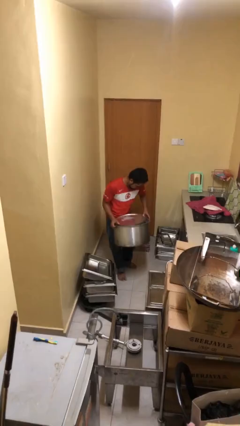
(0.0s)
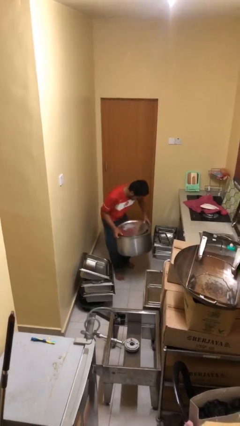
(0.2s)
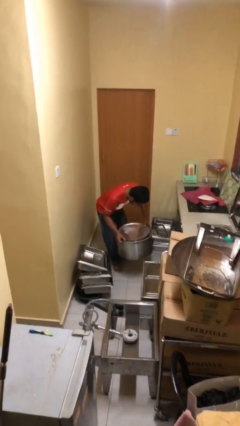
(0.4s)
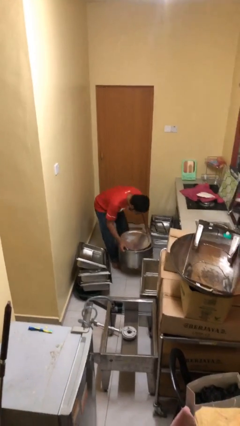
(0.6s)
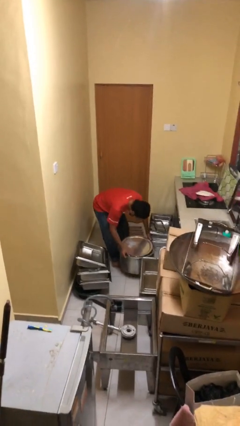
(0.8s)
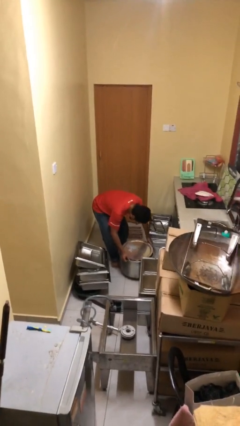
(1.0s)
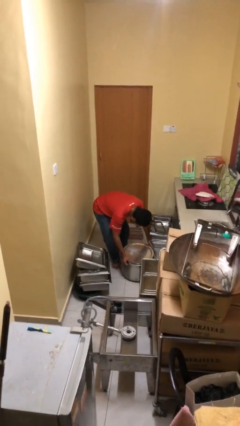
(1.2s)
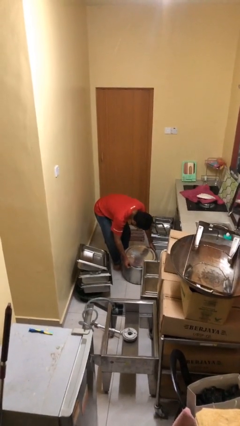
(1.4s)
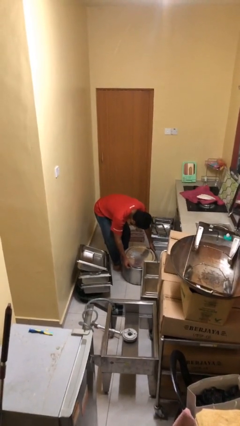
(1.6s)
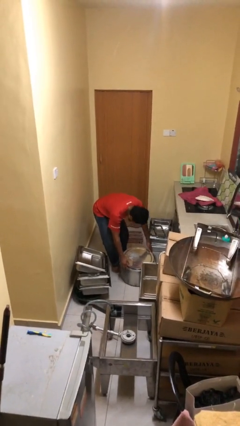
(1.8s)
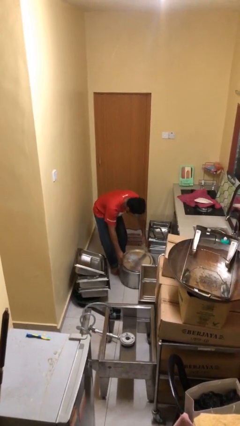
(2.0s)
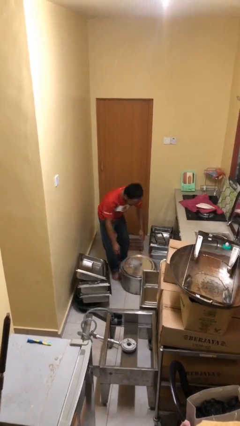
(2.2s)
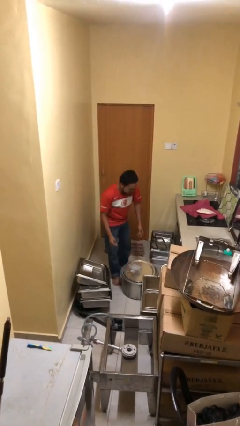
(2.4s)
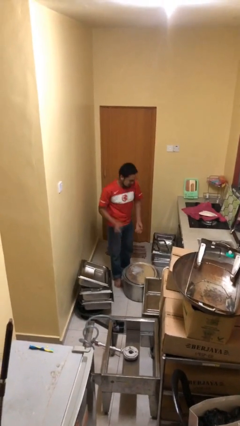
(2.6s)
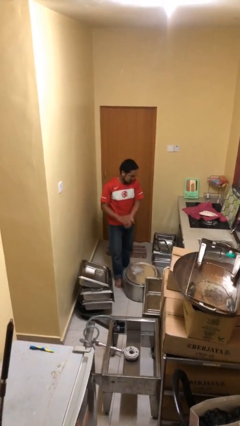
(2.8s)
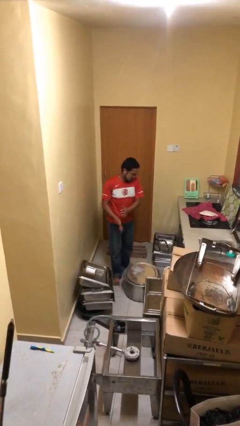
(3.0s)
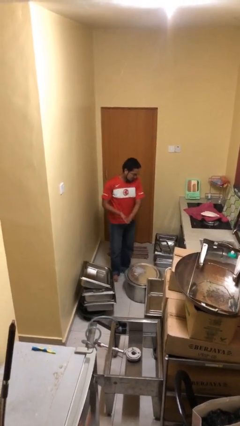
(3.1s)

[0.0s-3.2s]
person puts down object on floor

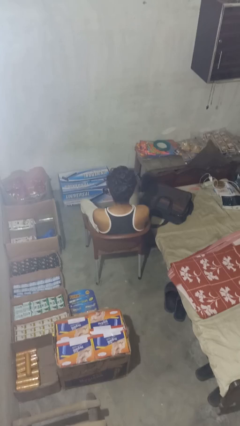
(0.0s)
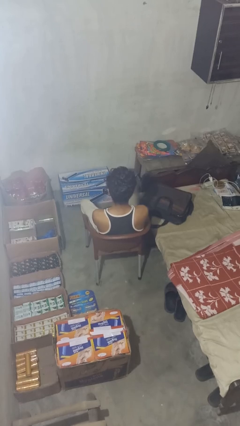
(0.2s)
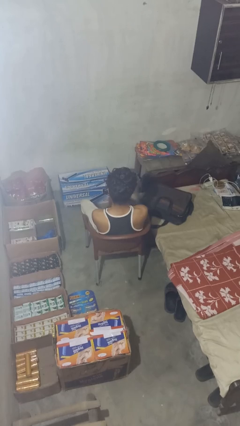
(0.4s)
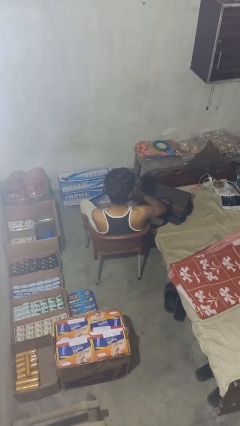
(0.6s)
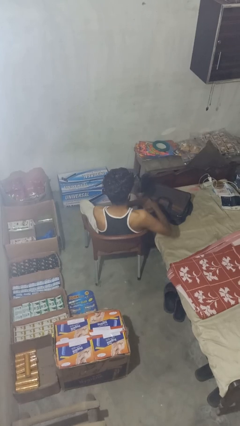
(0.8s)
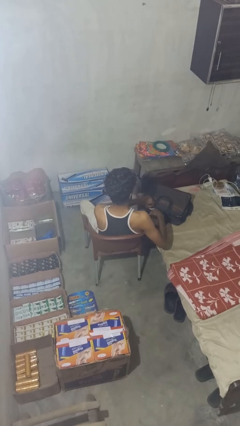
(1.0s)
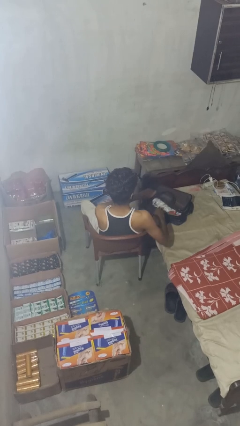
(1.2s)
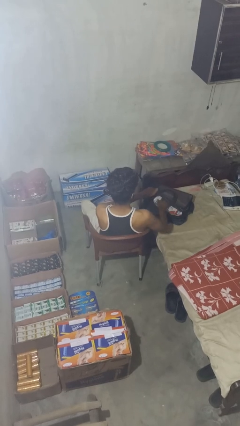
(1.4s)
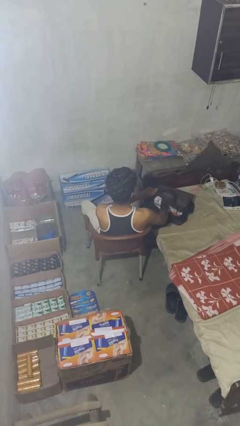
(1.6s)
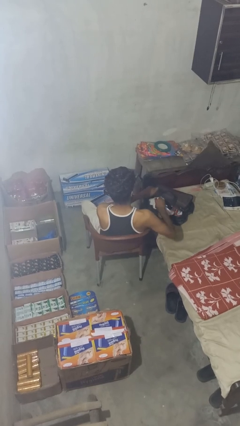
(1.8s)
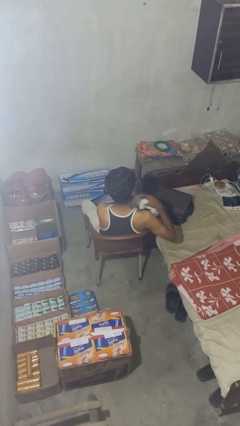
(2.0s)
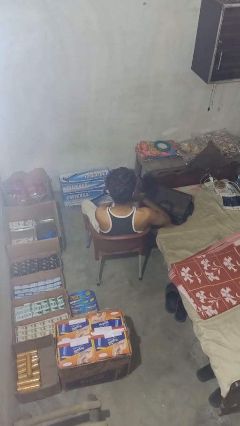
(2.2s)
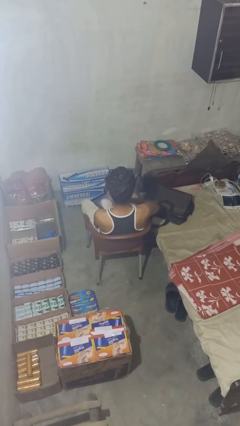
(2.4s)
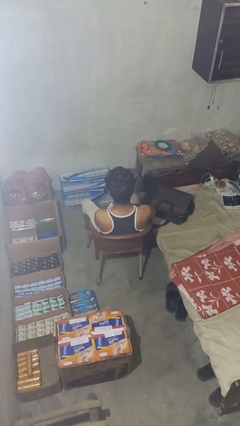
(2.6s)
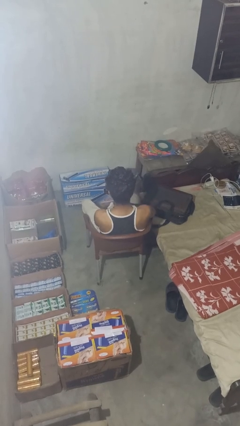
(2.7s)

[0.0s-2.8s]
person unloads clothes from suitcase

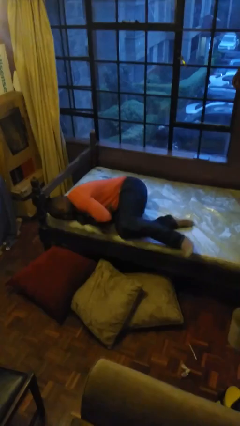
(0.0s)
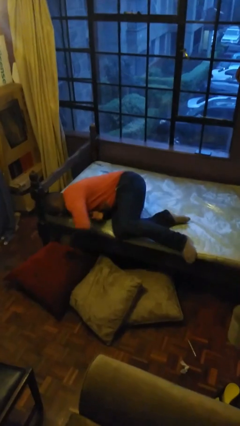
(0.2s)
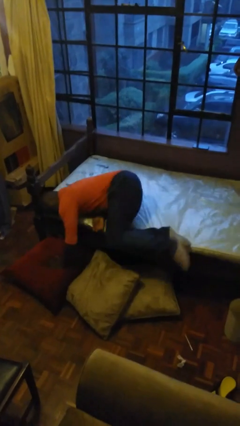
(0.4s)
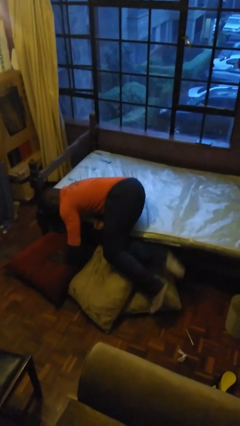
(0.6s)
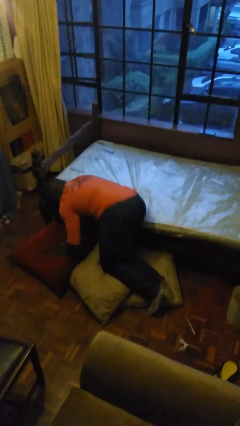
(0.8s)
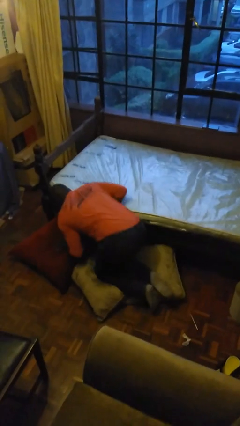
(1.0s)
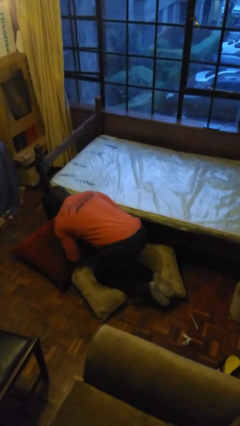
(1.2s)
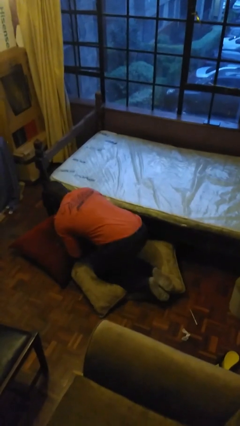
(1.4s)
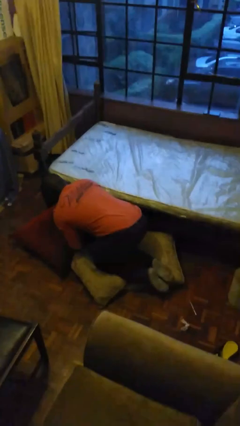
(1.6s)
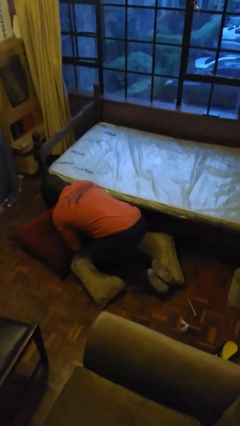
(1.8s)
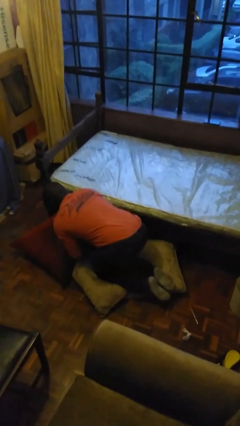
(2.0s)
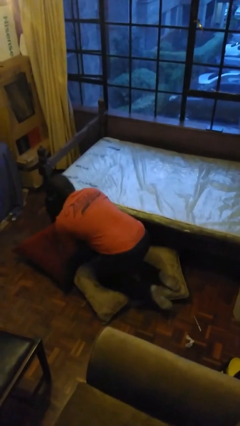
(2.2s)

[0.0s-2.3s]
person falls from bed

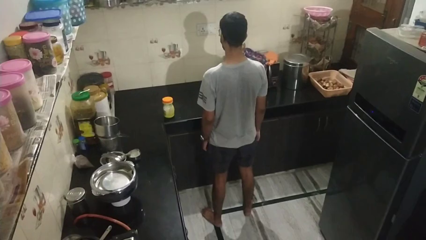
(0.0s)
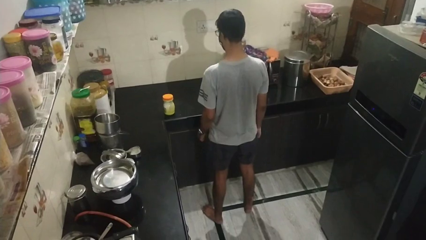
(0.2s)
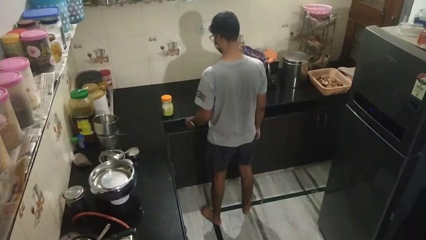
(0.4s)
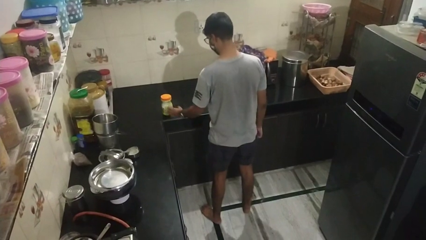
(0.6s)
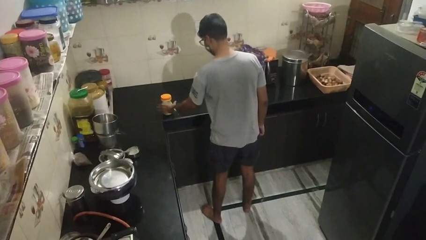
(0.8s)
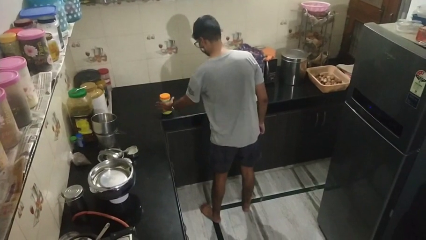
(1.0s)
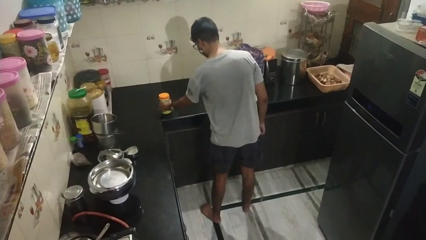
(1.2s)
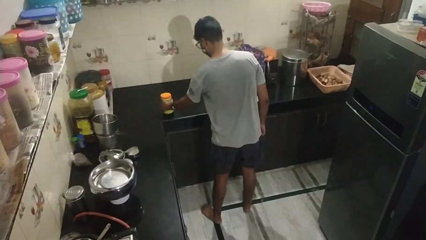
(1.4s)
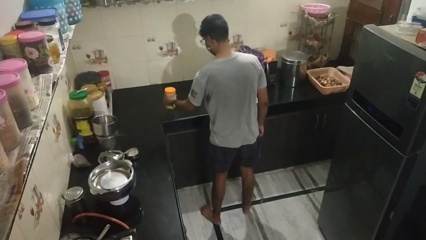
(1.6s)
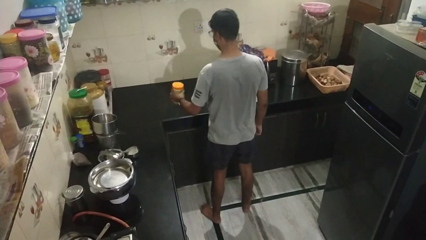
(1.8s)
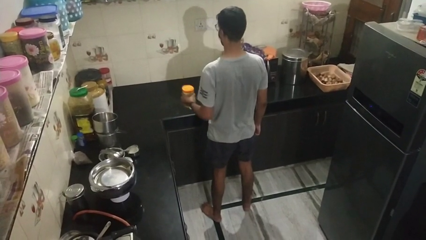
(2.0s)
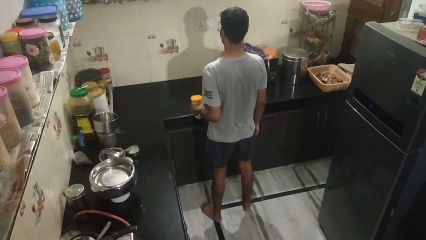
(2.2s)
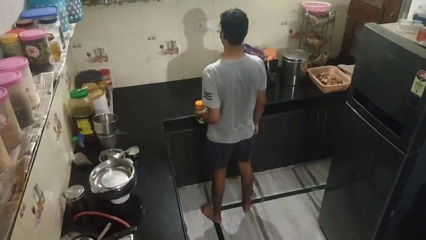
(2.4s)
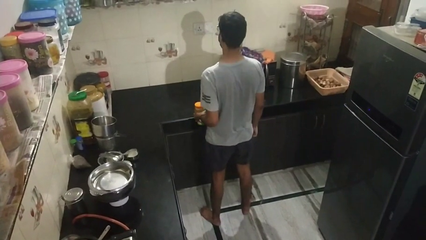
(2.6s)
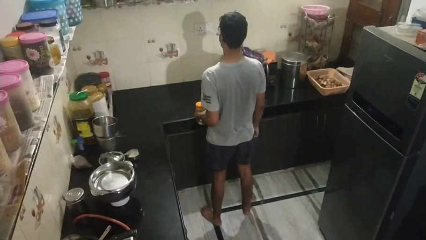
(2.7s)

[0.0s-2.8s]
person picks up object from countertop

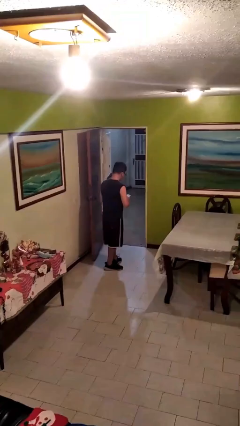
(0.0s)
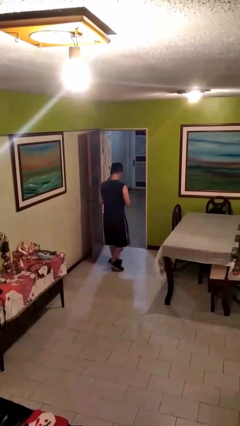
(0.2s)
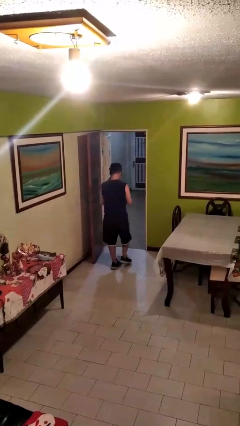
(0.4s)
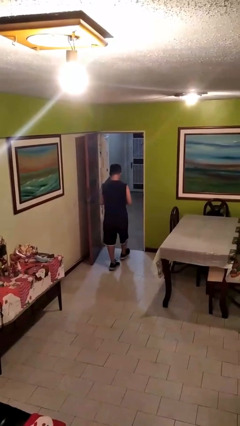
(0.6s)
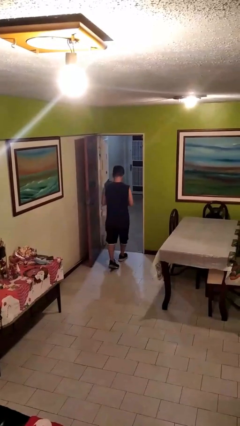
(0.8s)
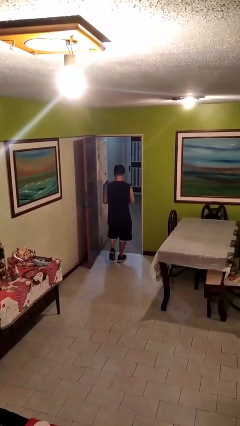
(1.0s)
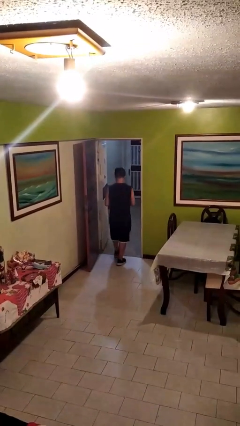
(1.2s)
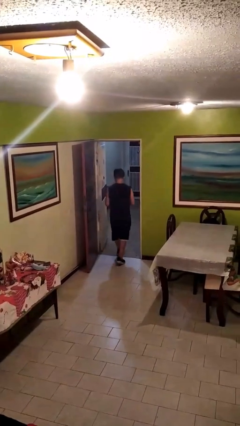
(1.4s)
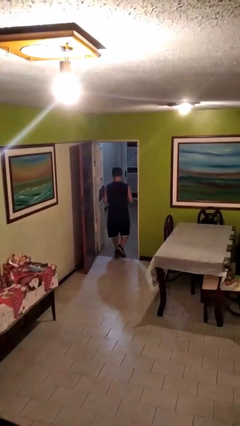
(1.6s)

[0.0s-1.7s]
person exits scene through structure

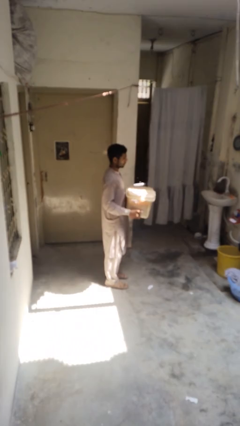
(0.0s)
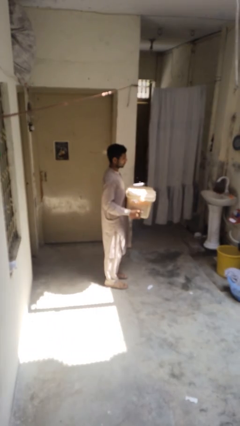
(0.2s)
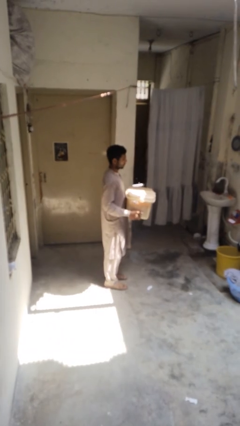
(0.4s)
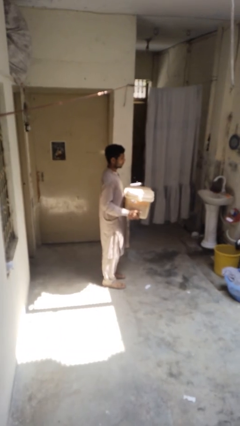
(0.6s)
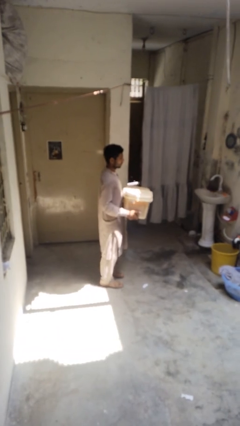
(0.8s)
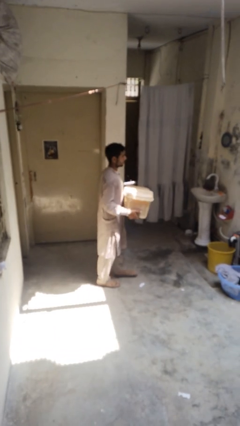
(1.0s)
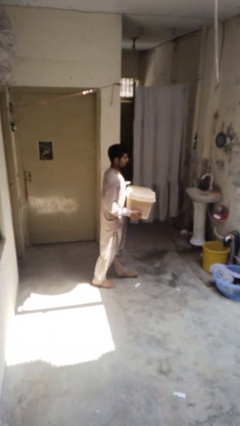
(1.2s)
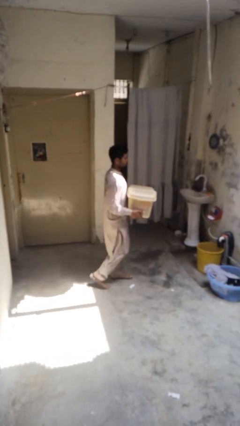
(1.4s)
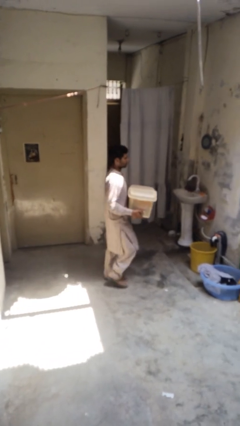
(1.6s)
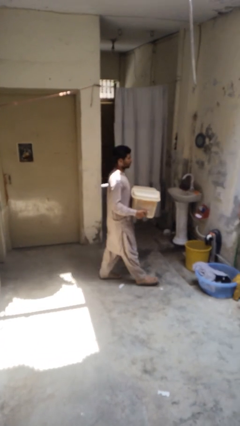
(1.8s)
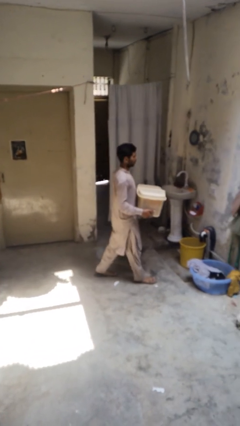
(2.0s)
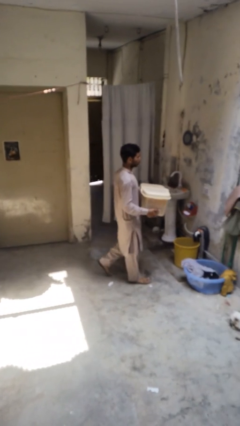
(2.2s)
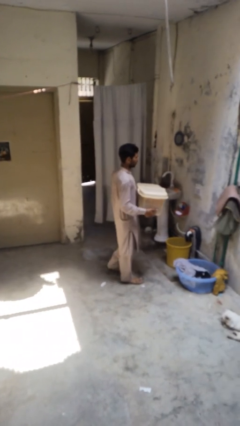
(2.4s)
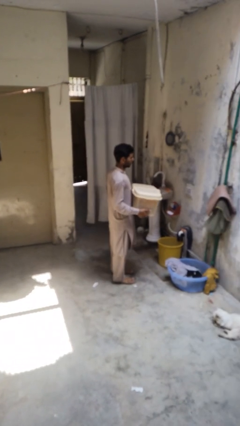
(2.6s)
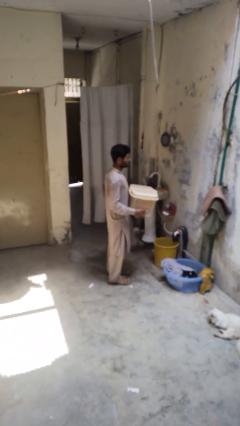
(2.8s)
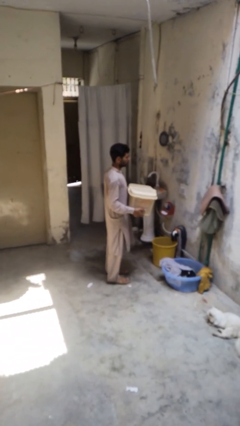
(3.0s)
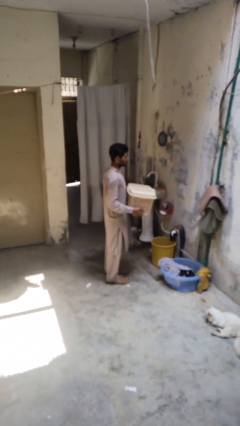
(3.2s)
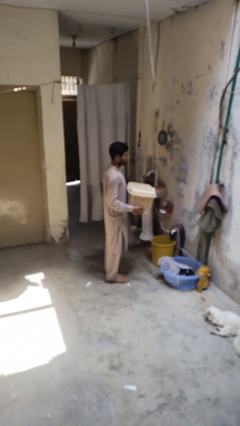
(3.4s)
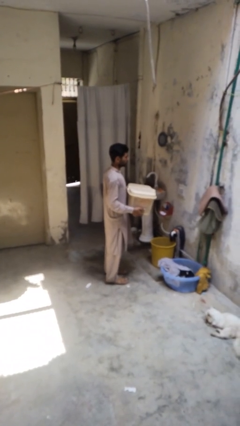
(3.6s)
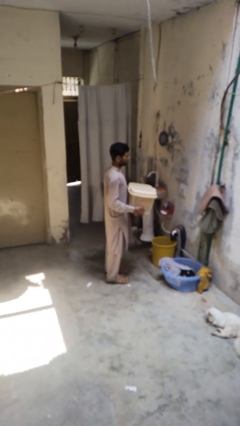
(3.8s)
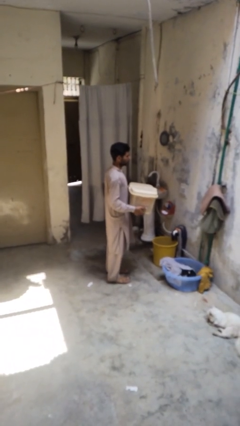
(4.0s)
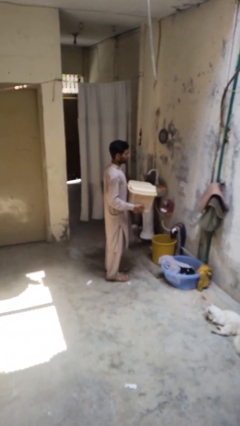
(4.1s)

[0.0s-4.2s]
person carries laundry basket

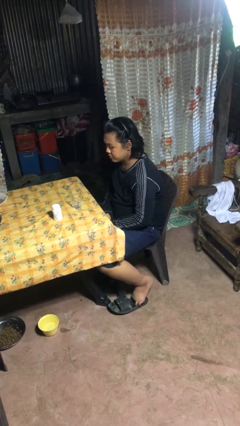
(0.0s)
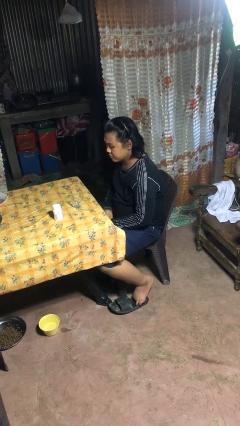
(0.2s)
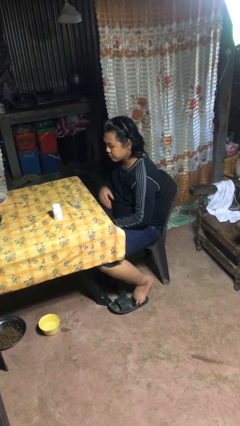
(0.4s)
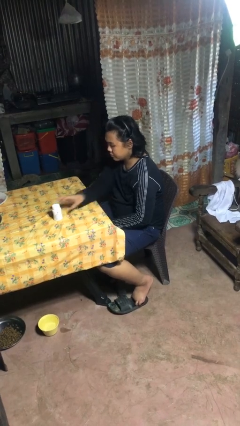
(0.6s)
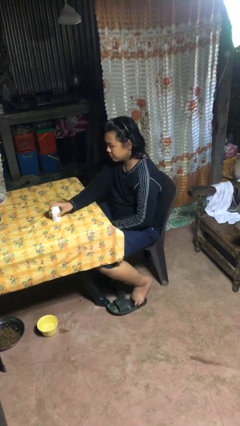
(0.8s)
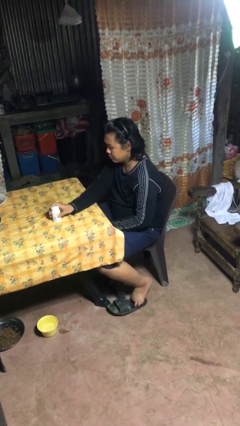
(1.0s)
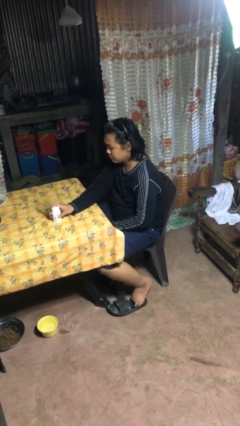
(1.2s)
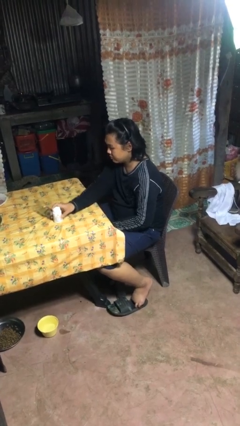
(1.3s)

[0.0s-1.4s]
person knocks over glass
